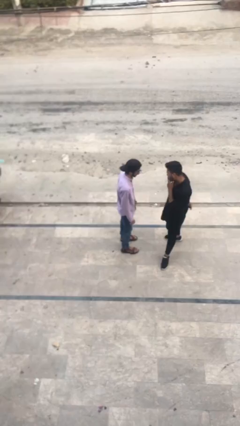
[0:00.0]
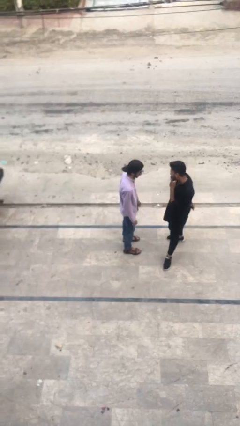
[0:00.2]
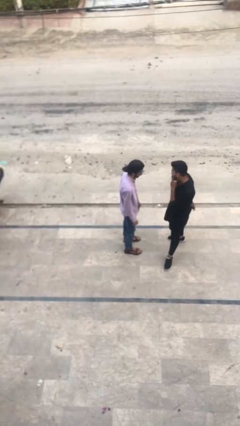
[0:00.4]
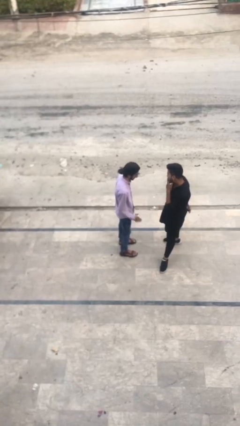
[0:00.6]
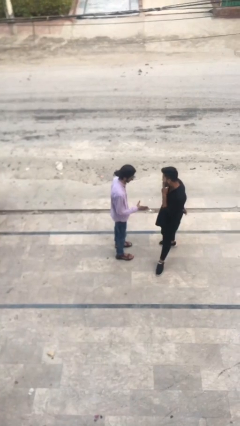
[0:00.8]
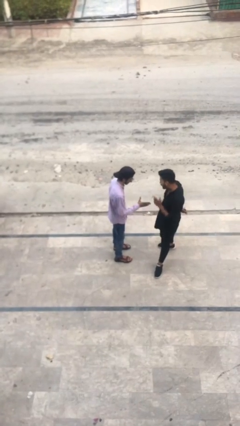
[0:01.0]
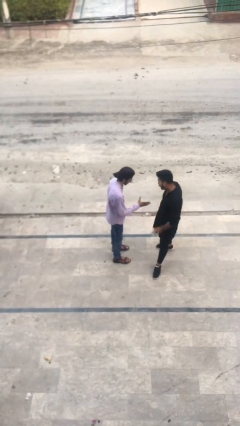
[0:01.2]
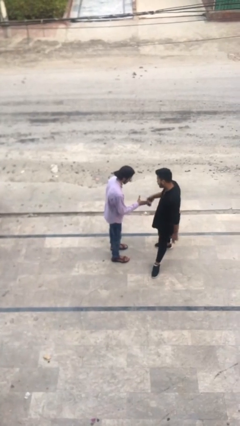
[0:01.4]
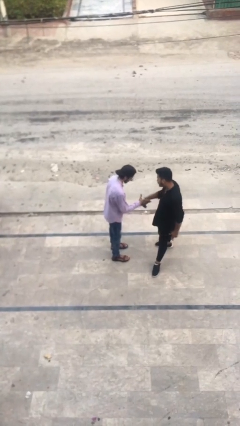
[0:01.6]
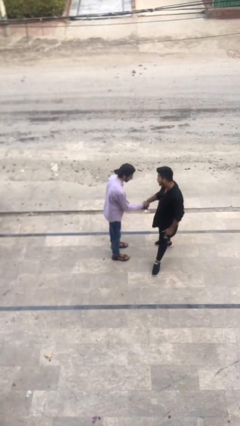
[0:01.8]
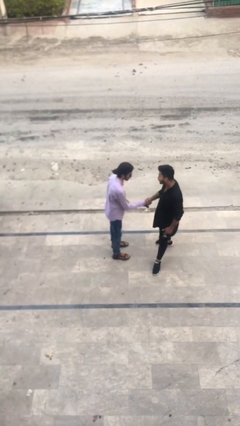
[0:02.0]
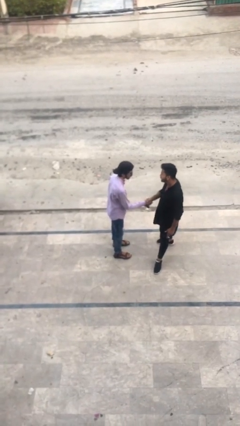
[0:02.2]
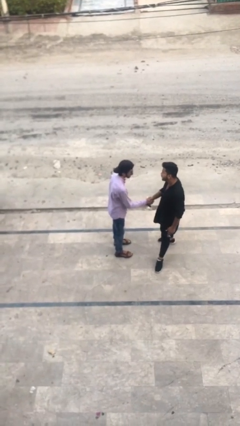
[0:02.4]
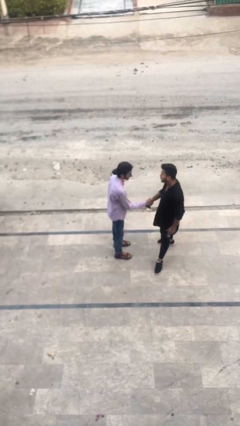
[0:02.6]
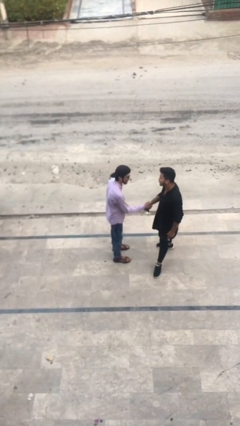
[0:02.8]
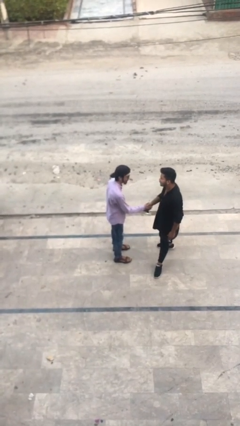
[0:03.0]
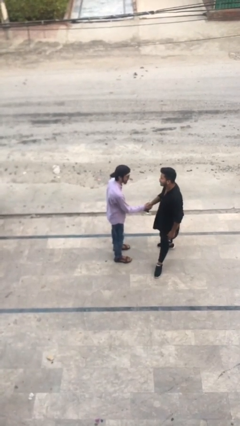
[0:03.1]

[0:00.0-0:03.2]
person shakes hand

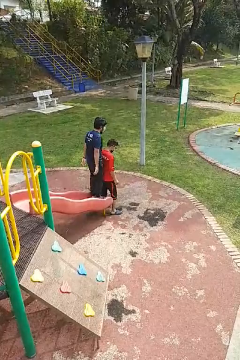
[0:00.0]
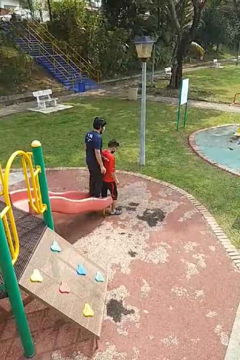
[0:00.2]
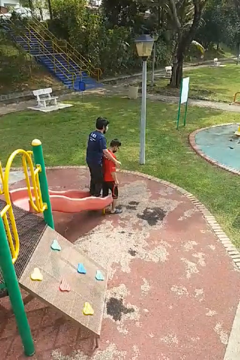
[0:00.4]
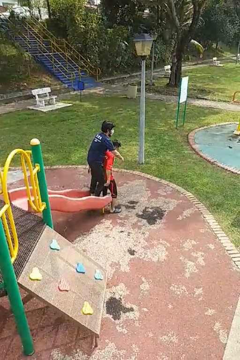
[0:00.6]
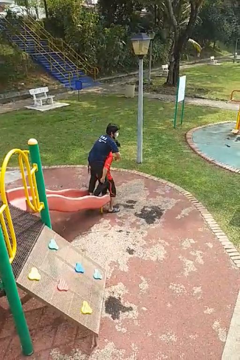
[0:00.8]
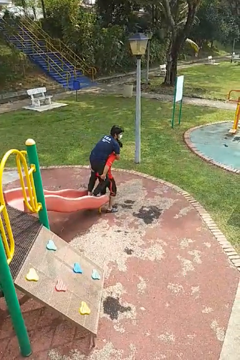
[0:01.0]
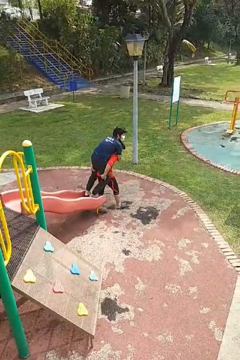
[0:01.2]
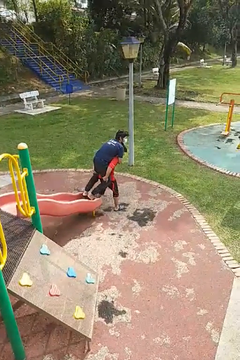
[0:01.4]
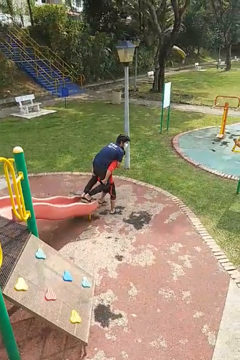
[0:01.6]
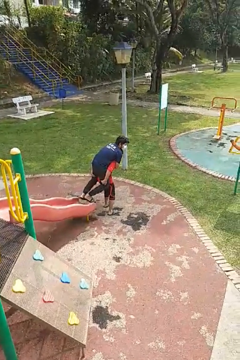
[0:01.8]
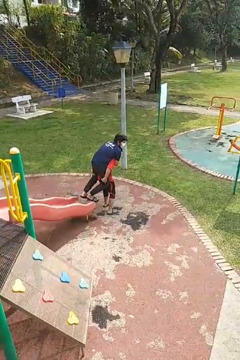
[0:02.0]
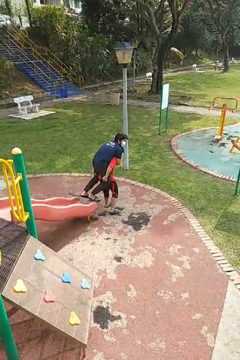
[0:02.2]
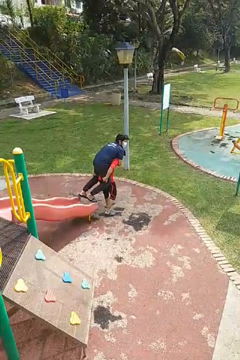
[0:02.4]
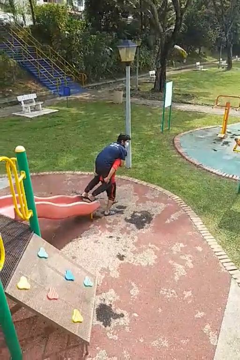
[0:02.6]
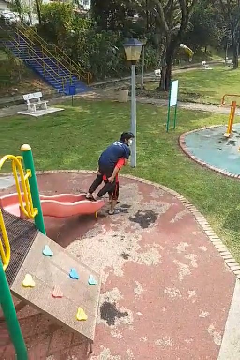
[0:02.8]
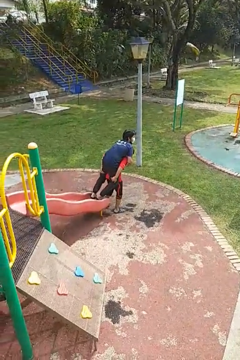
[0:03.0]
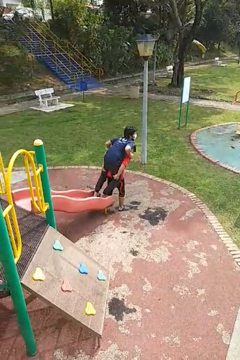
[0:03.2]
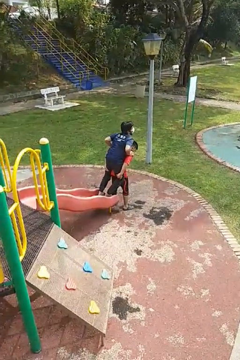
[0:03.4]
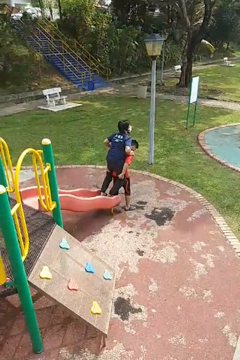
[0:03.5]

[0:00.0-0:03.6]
person carries person on back

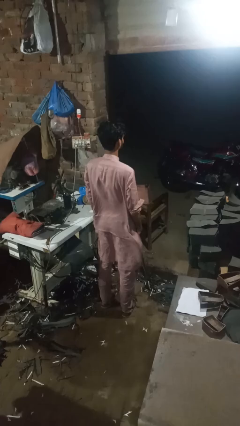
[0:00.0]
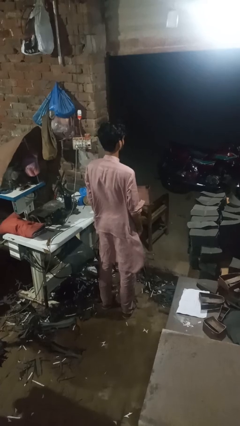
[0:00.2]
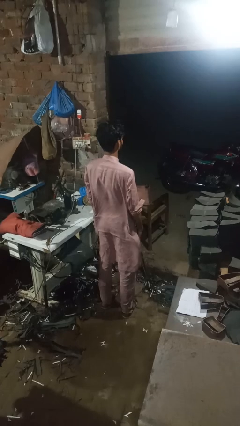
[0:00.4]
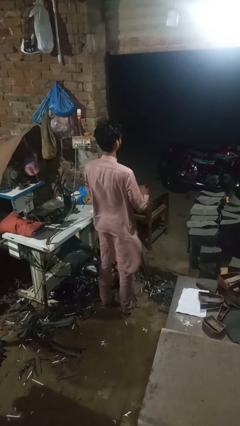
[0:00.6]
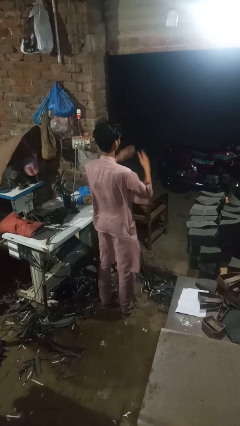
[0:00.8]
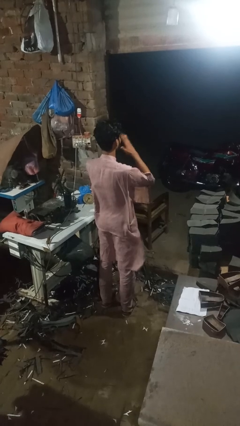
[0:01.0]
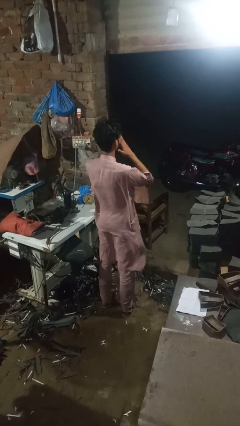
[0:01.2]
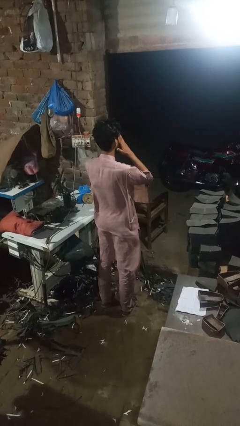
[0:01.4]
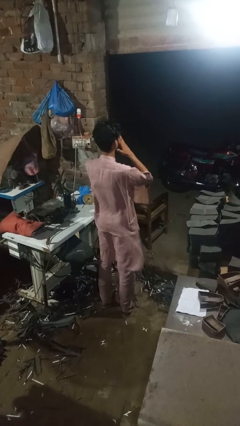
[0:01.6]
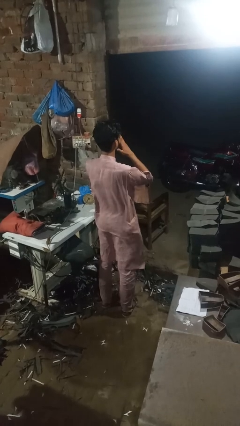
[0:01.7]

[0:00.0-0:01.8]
person sneezes into hand

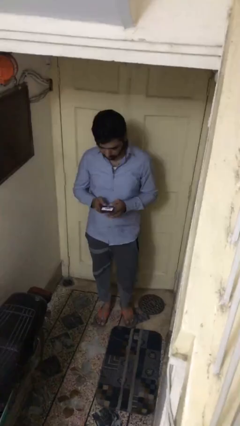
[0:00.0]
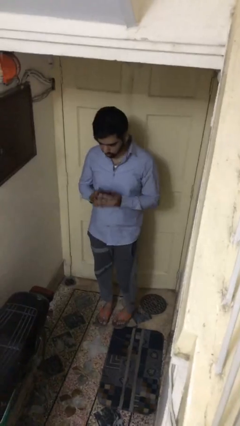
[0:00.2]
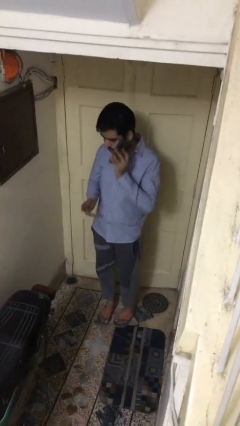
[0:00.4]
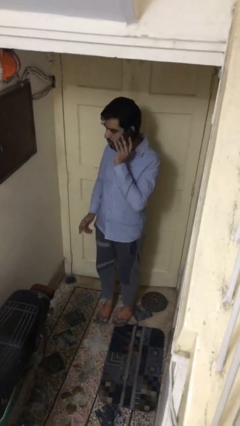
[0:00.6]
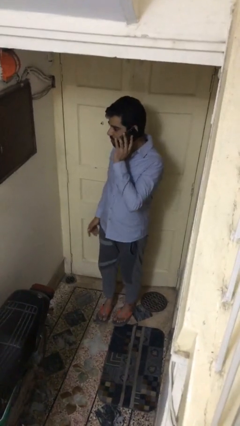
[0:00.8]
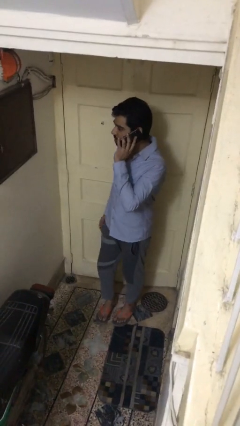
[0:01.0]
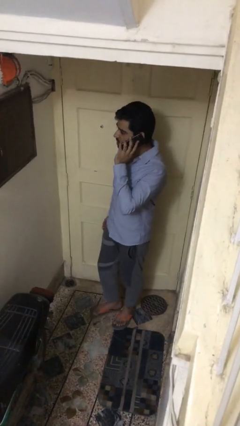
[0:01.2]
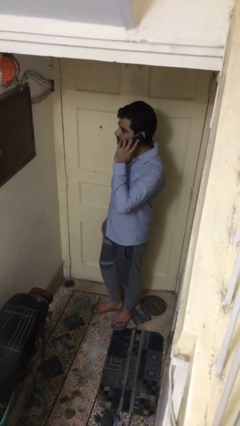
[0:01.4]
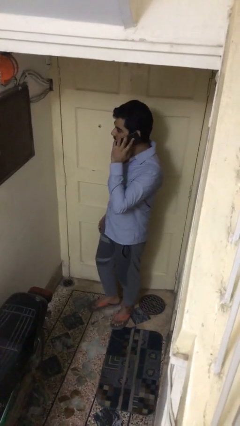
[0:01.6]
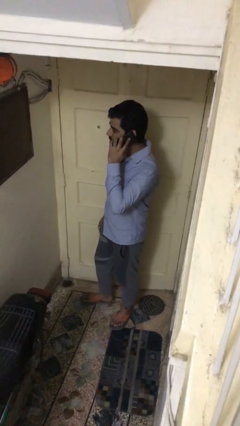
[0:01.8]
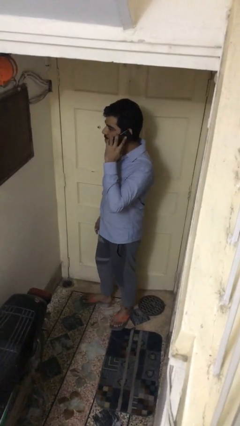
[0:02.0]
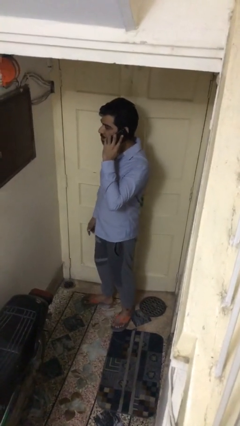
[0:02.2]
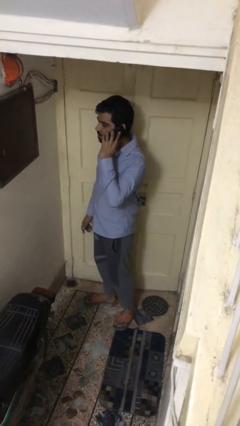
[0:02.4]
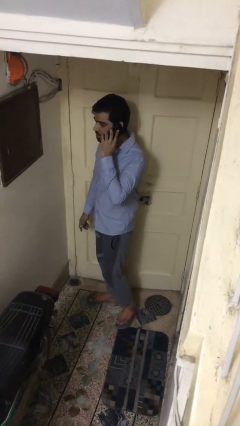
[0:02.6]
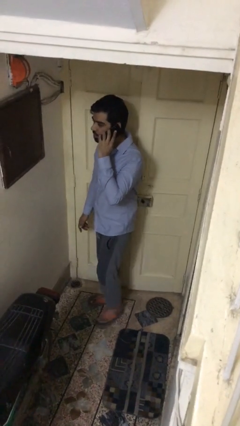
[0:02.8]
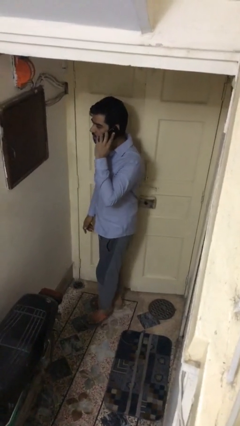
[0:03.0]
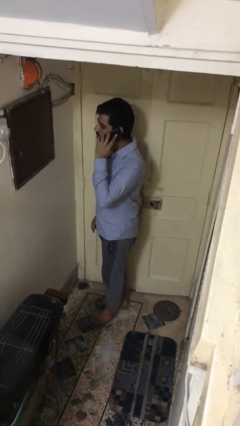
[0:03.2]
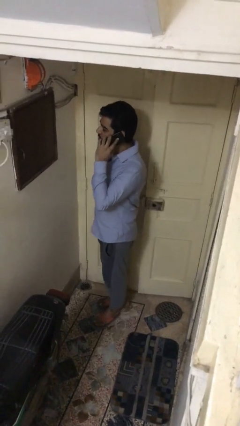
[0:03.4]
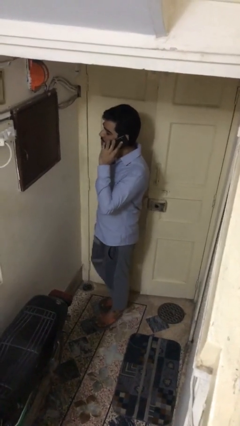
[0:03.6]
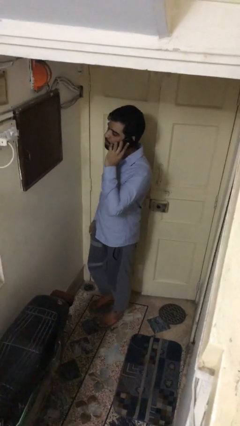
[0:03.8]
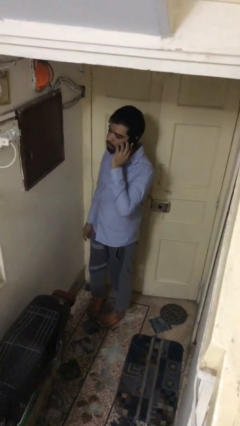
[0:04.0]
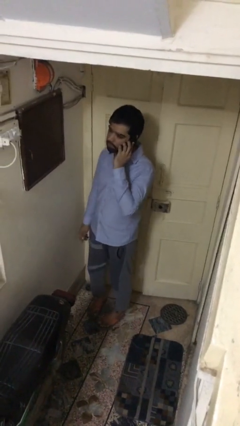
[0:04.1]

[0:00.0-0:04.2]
person talks on phone

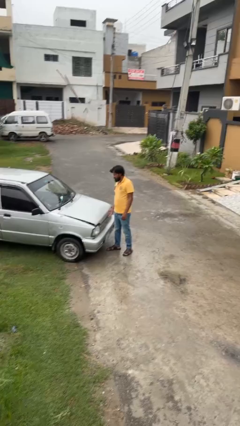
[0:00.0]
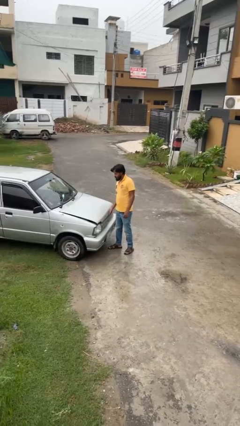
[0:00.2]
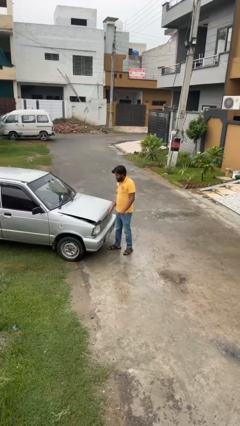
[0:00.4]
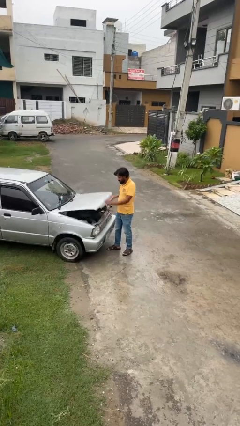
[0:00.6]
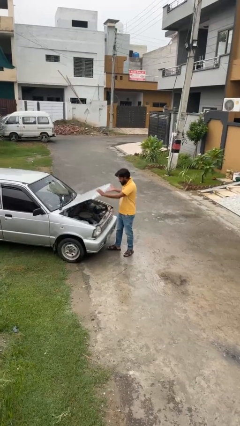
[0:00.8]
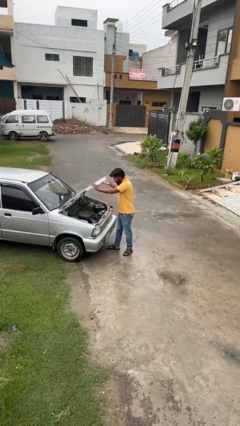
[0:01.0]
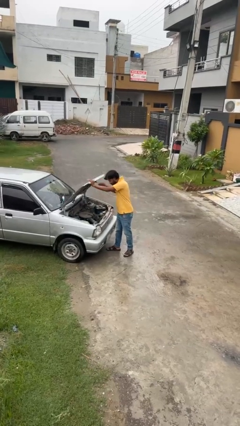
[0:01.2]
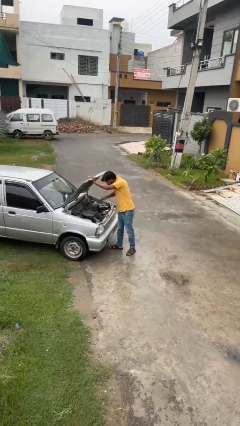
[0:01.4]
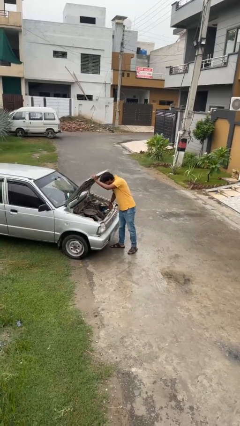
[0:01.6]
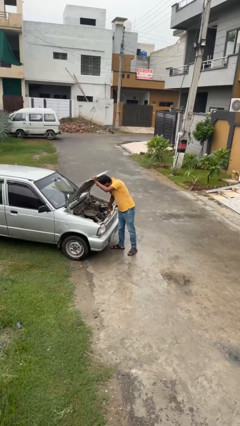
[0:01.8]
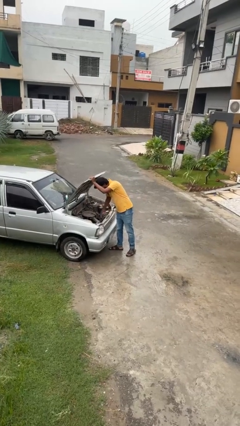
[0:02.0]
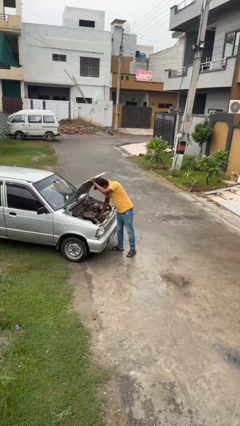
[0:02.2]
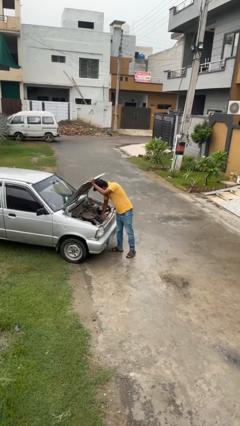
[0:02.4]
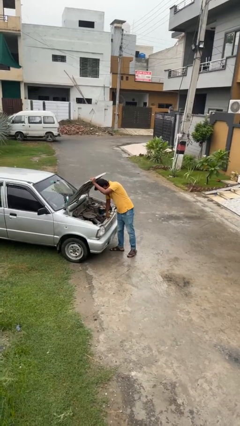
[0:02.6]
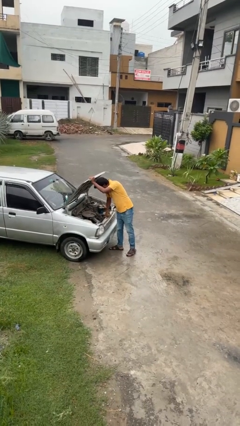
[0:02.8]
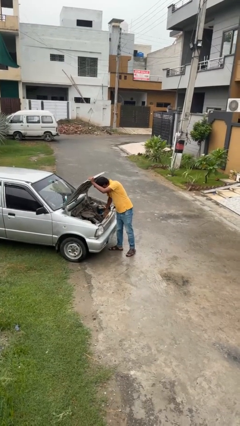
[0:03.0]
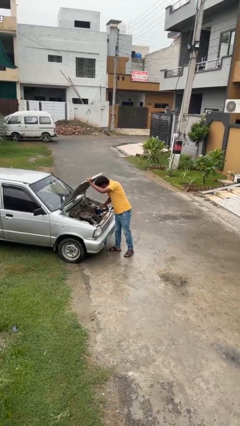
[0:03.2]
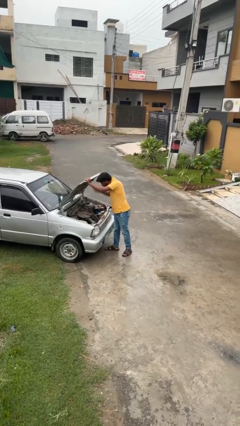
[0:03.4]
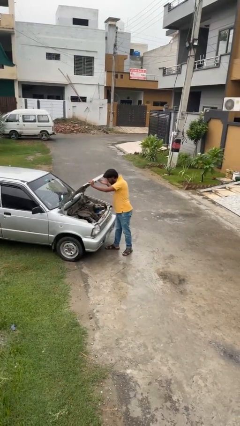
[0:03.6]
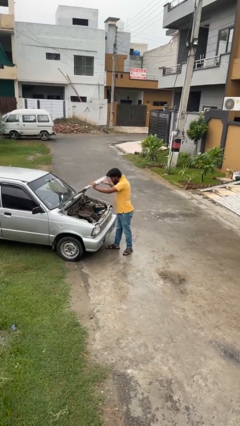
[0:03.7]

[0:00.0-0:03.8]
person opens car hood

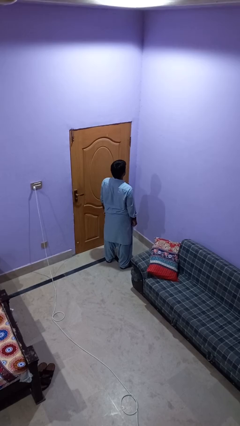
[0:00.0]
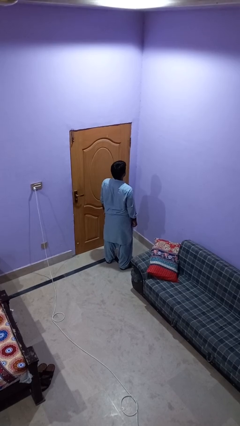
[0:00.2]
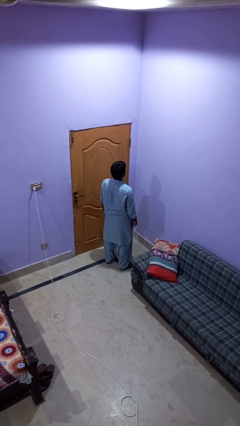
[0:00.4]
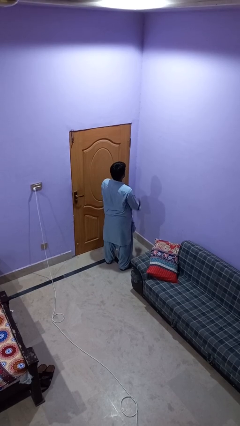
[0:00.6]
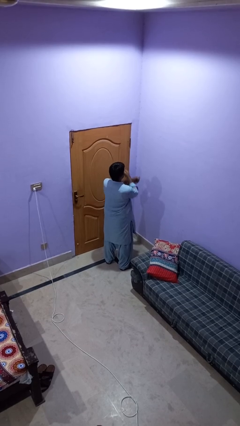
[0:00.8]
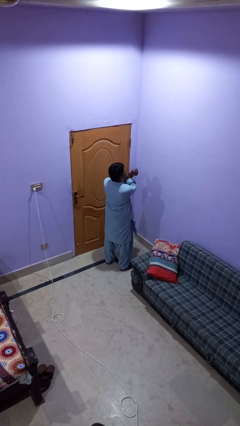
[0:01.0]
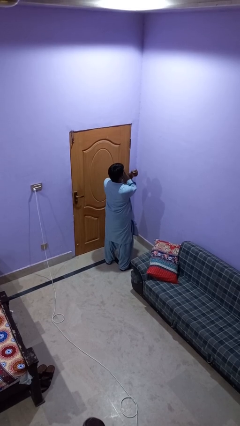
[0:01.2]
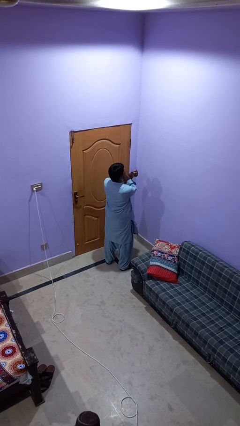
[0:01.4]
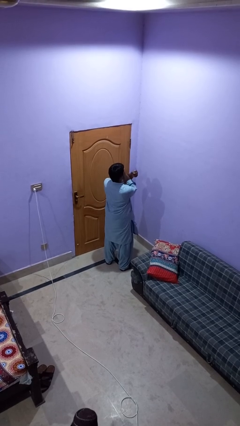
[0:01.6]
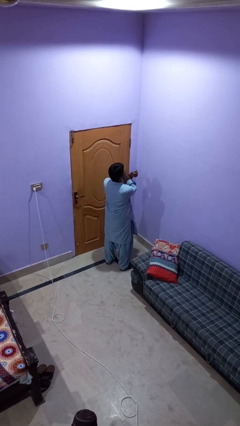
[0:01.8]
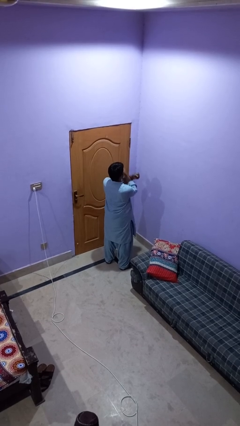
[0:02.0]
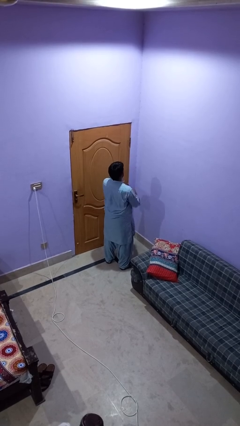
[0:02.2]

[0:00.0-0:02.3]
person gestures arms x
